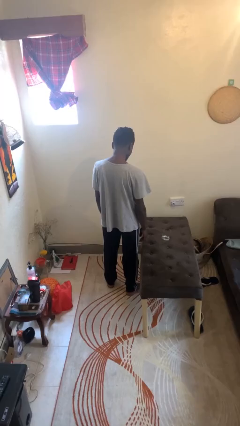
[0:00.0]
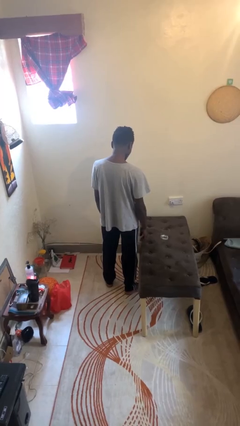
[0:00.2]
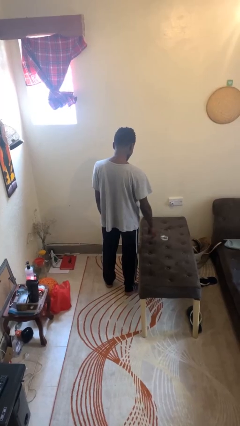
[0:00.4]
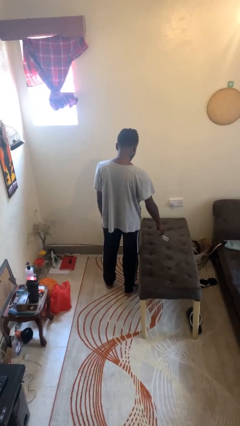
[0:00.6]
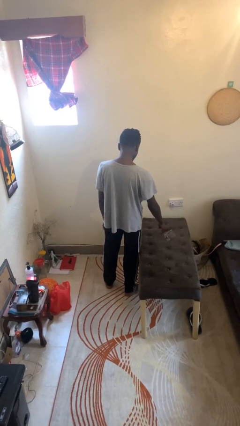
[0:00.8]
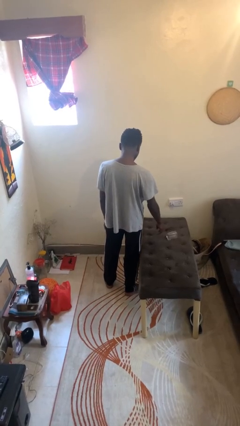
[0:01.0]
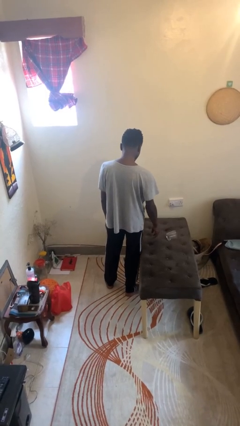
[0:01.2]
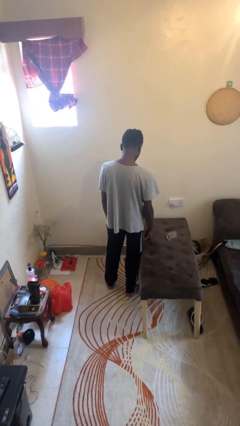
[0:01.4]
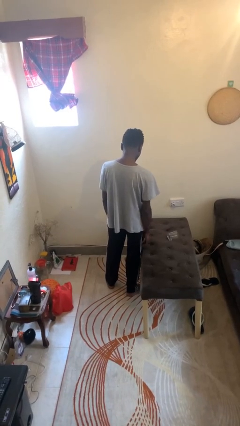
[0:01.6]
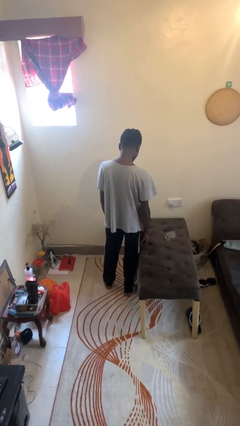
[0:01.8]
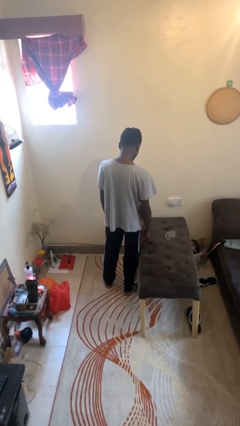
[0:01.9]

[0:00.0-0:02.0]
person knocks over glass

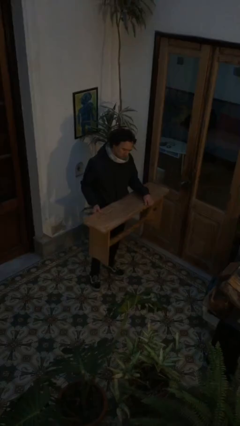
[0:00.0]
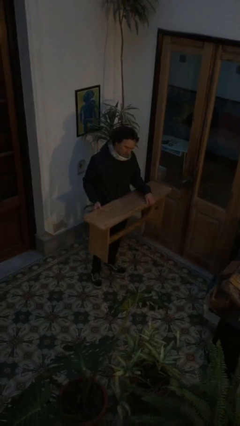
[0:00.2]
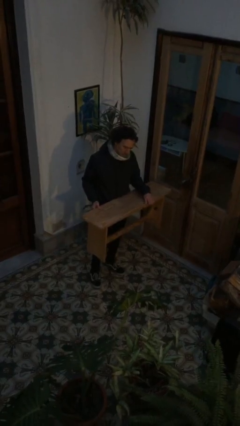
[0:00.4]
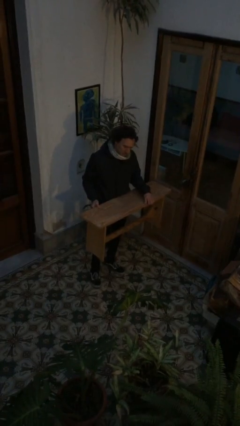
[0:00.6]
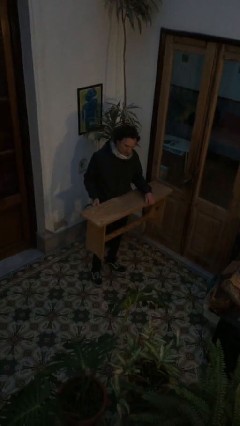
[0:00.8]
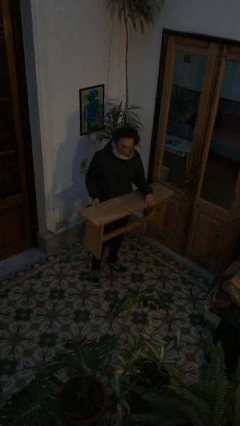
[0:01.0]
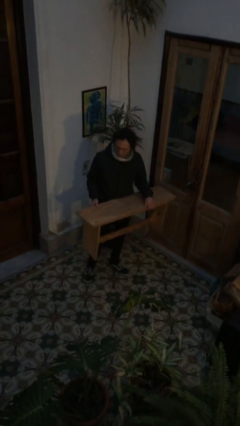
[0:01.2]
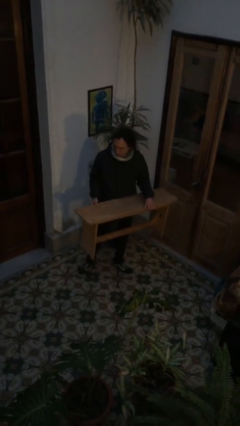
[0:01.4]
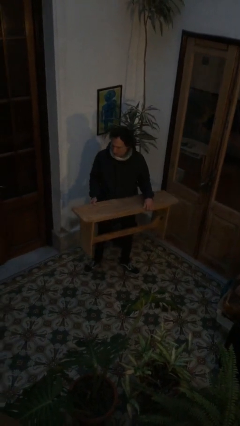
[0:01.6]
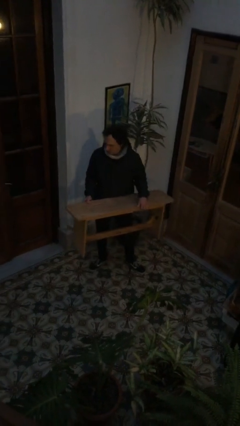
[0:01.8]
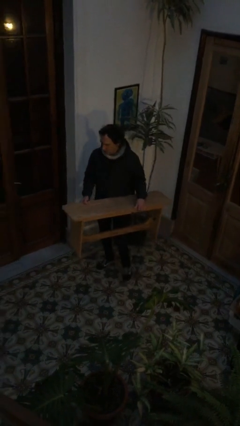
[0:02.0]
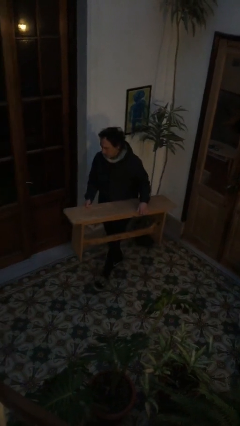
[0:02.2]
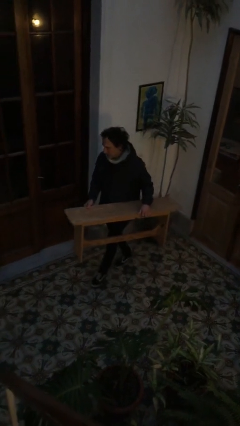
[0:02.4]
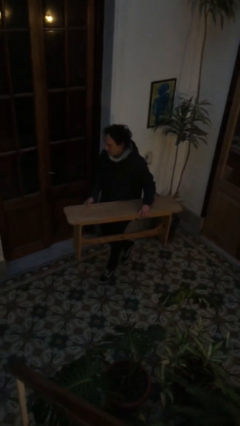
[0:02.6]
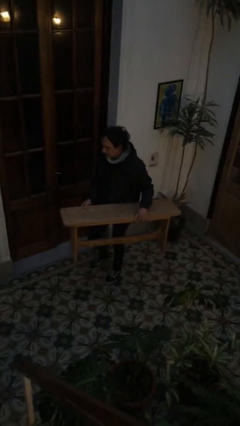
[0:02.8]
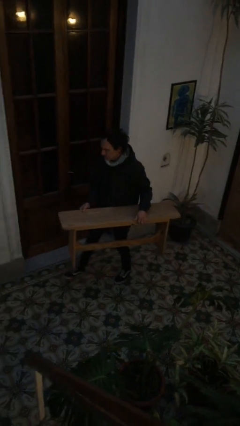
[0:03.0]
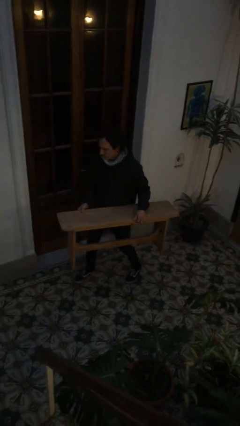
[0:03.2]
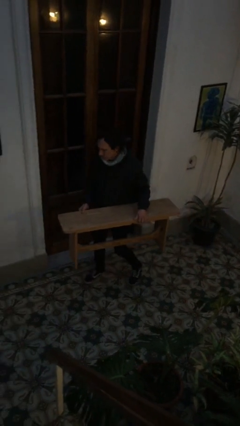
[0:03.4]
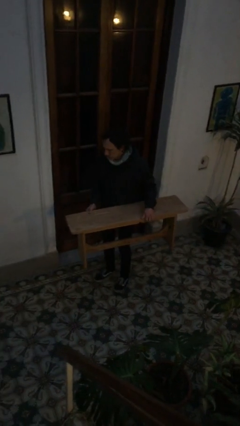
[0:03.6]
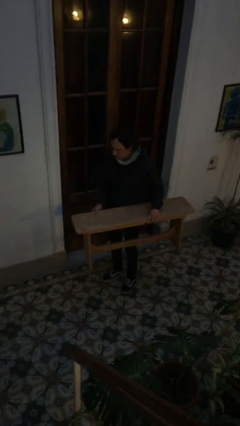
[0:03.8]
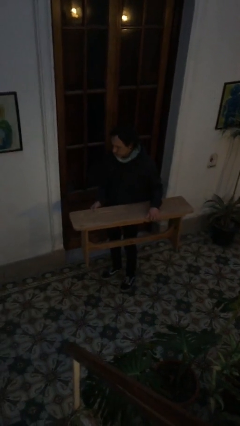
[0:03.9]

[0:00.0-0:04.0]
person carries furniture

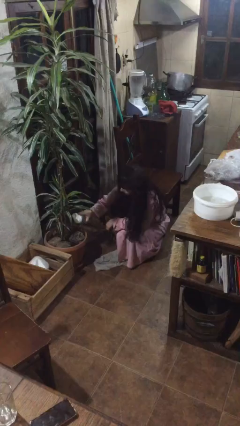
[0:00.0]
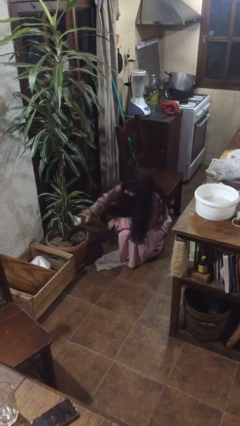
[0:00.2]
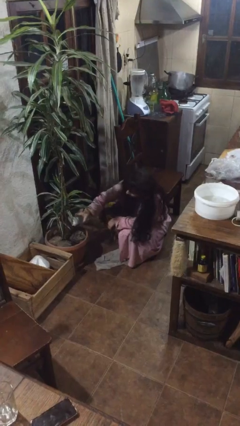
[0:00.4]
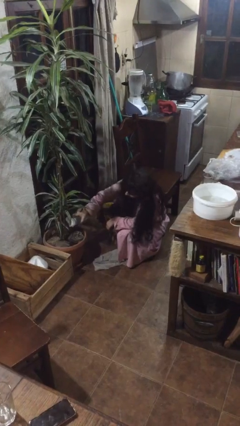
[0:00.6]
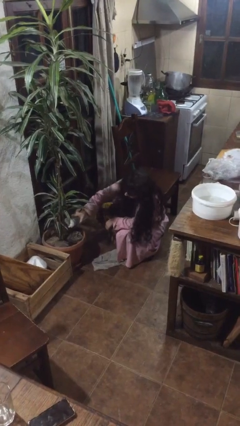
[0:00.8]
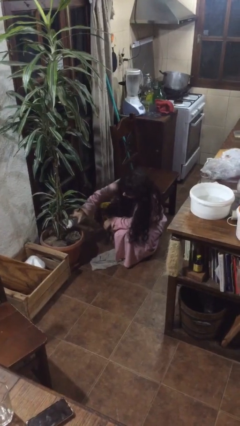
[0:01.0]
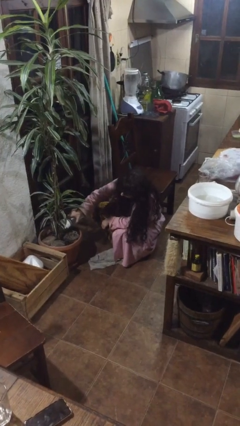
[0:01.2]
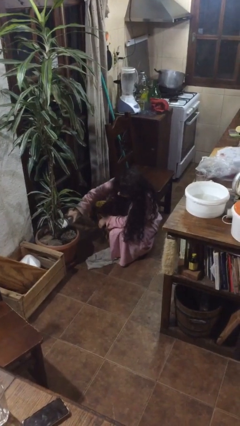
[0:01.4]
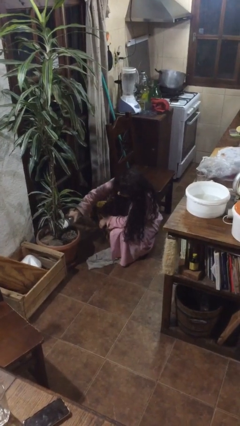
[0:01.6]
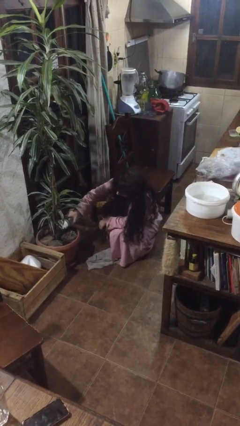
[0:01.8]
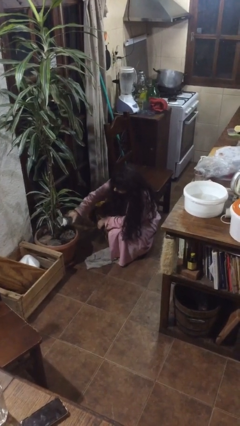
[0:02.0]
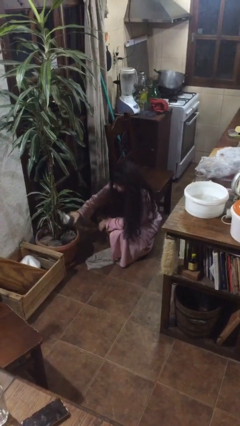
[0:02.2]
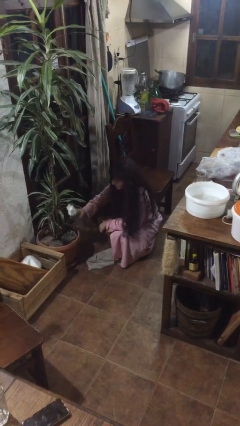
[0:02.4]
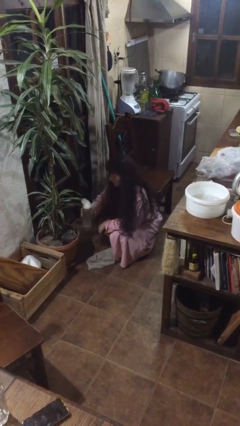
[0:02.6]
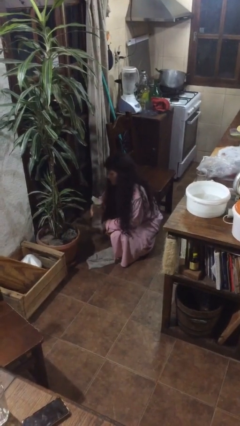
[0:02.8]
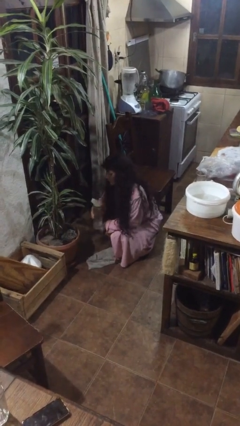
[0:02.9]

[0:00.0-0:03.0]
person waters houseplant

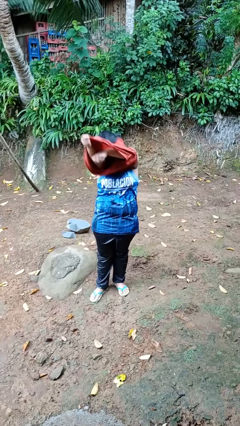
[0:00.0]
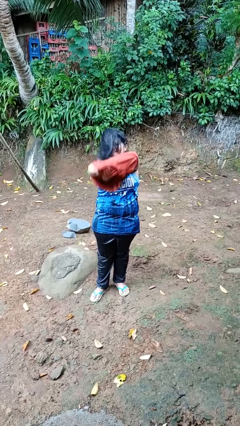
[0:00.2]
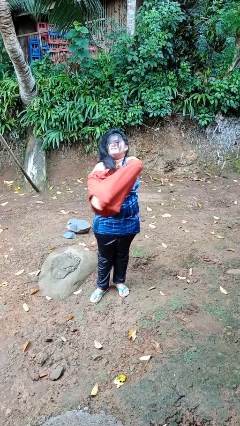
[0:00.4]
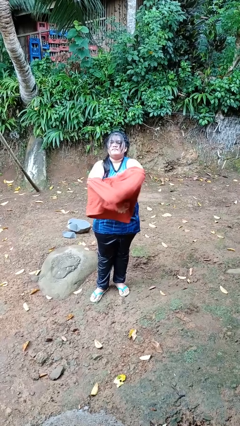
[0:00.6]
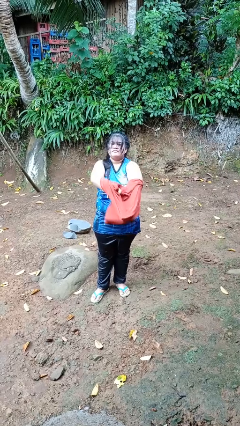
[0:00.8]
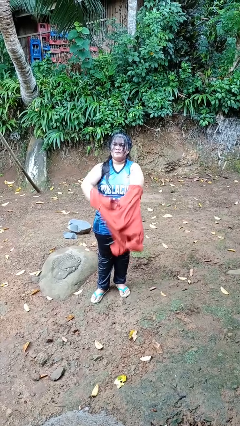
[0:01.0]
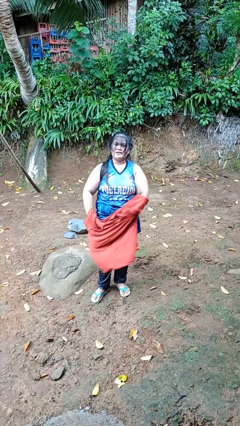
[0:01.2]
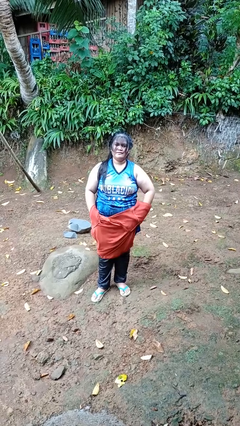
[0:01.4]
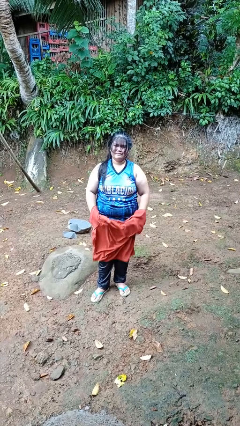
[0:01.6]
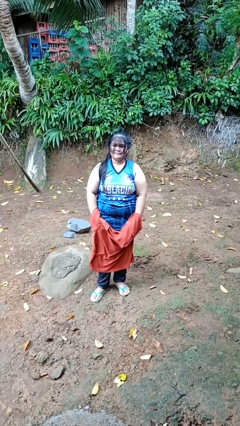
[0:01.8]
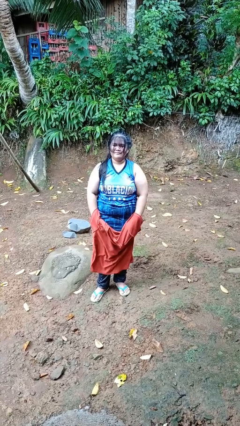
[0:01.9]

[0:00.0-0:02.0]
person takes off shirt

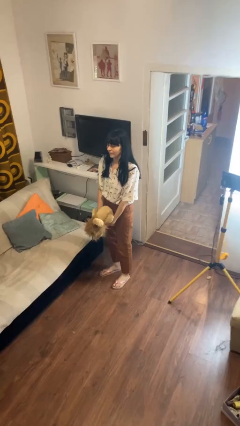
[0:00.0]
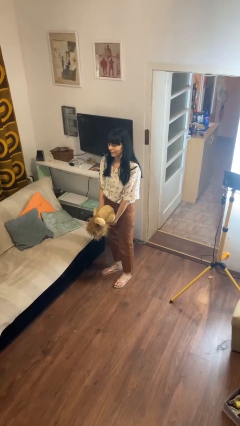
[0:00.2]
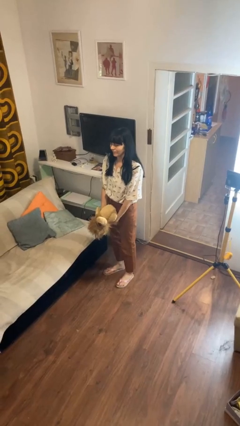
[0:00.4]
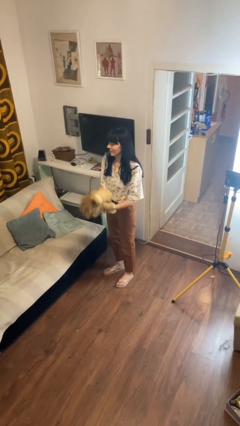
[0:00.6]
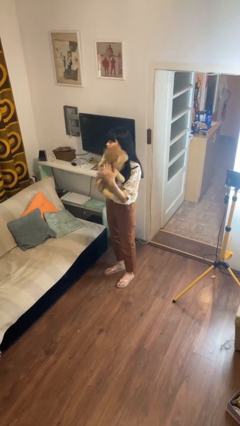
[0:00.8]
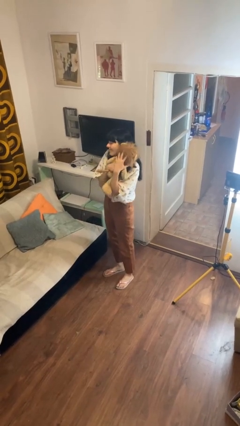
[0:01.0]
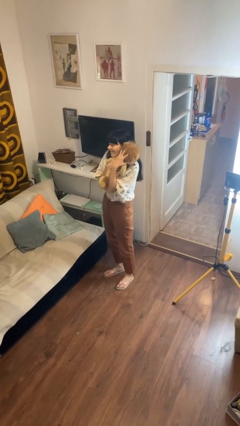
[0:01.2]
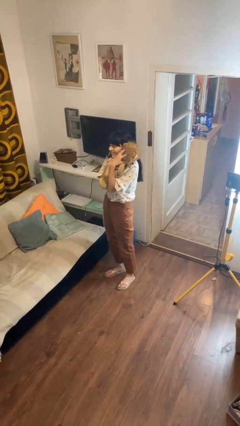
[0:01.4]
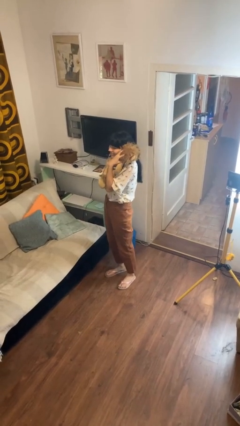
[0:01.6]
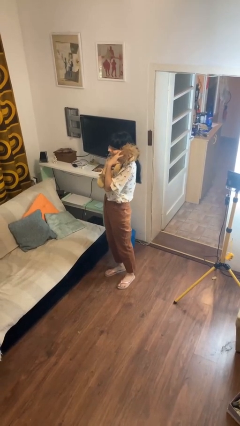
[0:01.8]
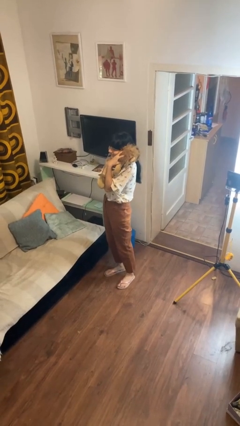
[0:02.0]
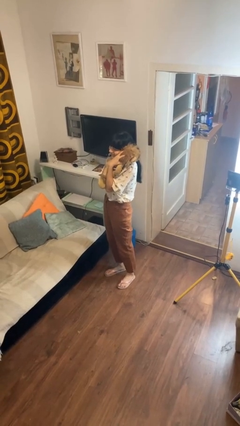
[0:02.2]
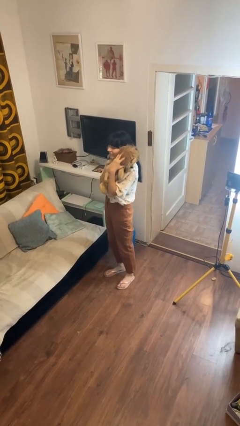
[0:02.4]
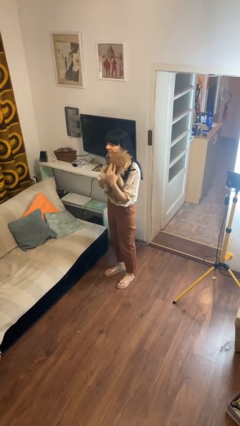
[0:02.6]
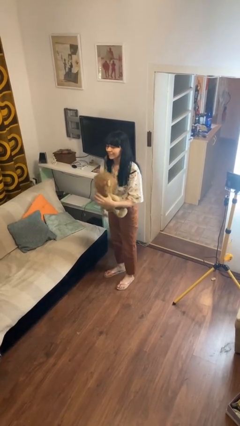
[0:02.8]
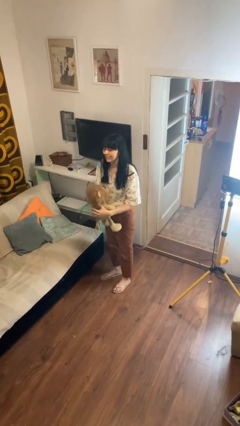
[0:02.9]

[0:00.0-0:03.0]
person hugs stuffed animal

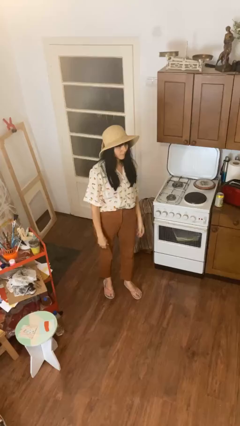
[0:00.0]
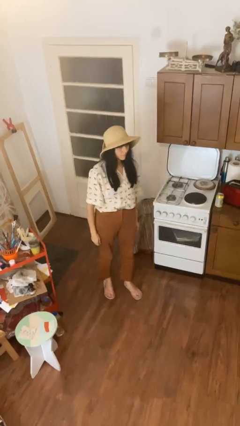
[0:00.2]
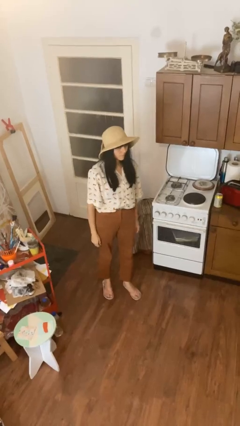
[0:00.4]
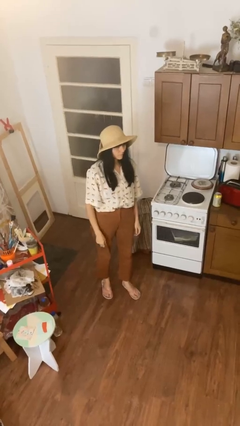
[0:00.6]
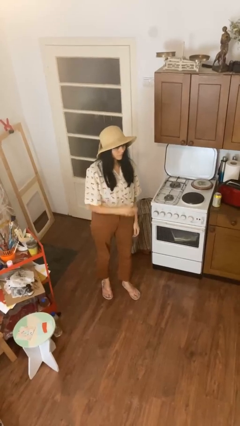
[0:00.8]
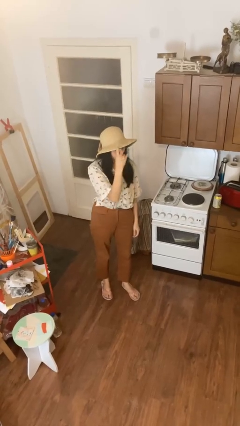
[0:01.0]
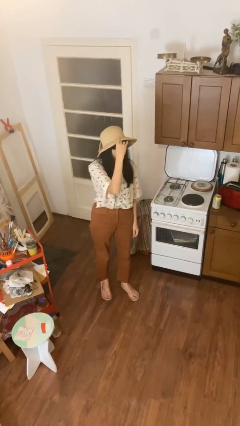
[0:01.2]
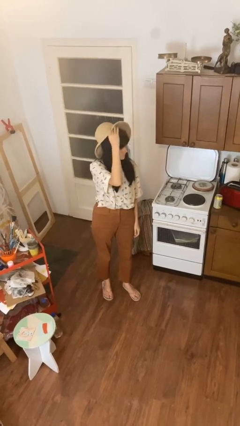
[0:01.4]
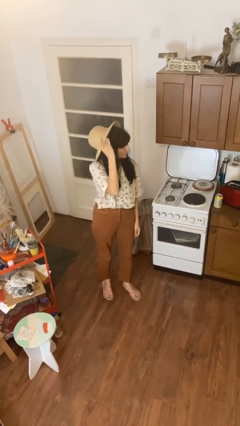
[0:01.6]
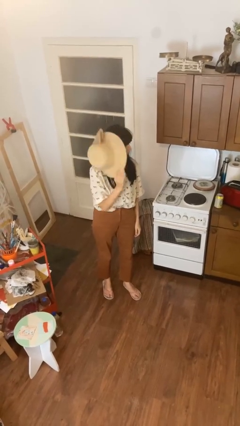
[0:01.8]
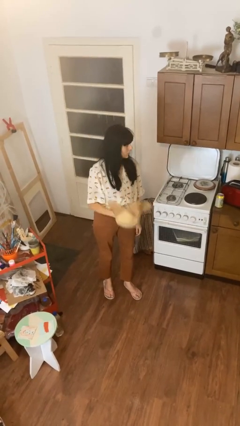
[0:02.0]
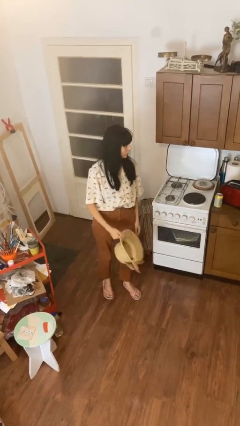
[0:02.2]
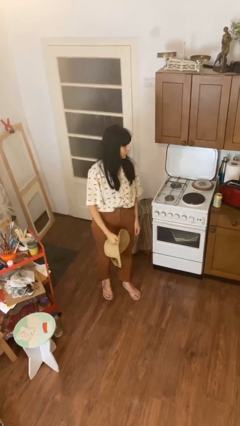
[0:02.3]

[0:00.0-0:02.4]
person takes off hat

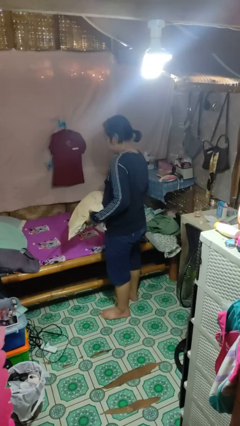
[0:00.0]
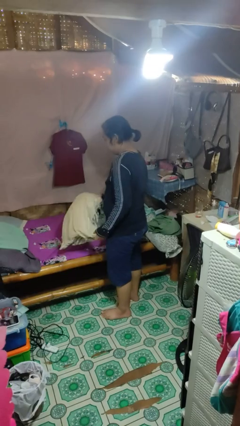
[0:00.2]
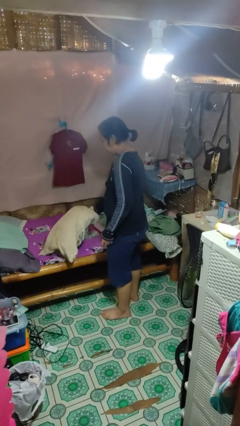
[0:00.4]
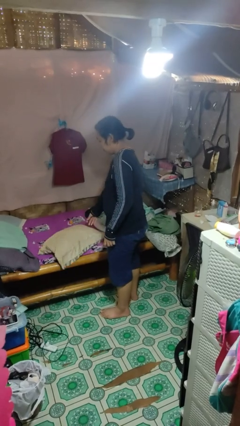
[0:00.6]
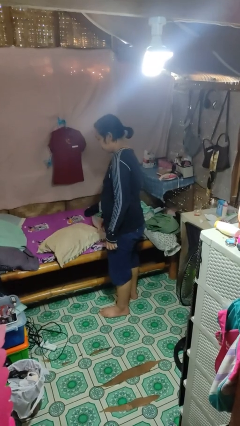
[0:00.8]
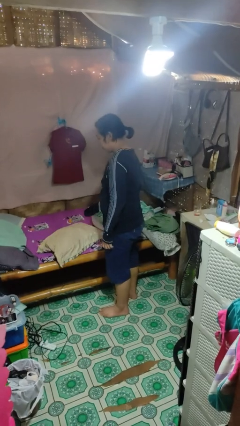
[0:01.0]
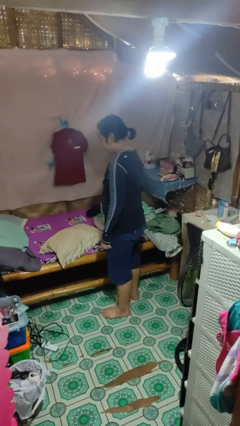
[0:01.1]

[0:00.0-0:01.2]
person puts down object on bed
